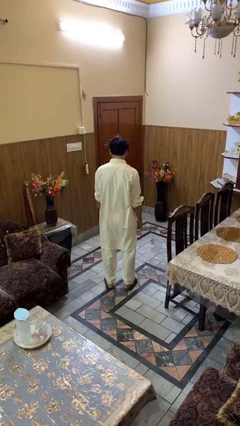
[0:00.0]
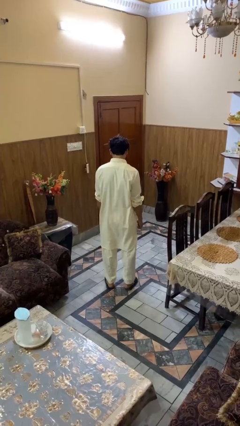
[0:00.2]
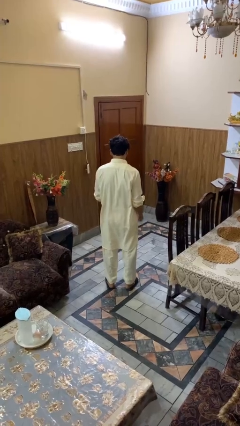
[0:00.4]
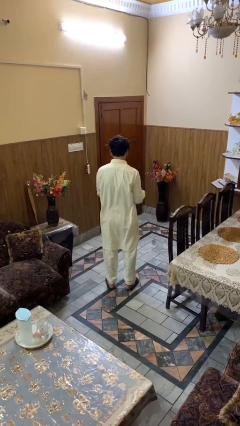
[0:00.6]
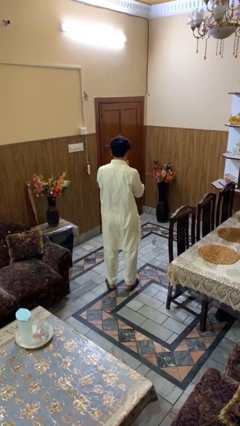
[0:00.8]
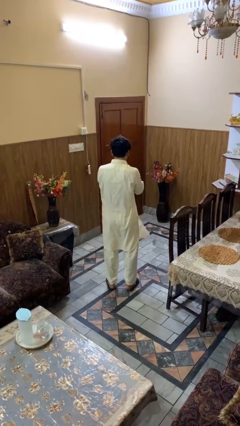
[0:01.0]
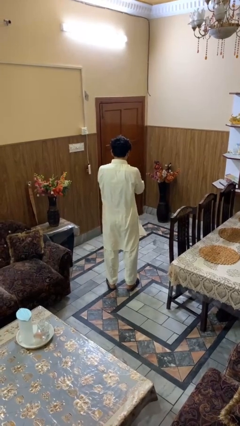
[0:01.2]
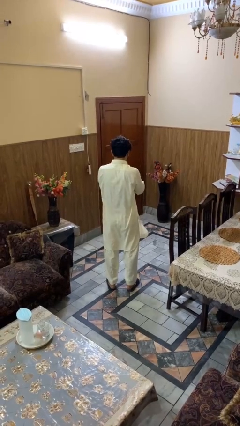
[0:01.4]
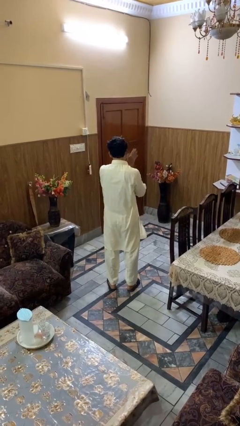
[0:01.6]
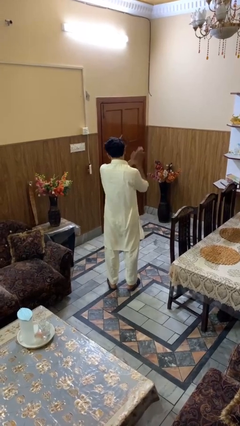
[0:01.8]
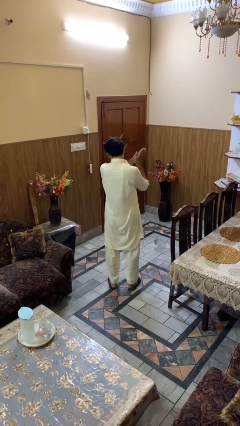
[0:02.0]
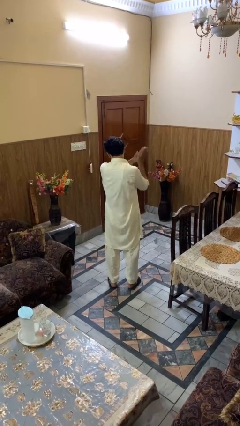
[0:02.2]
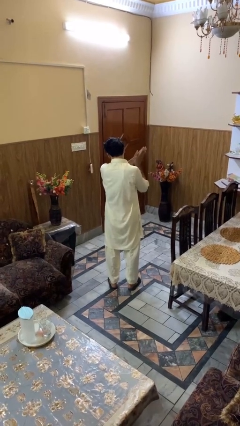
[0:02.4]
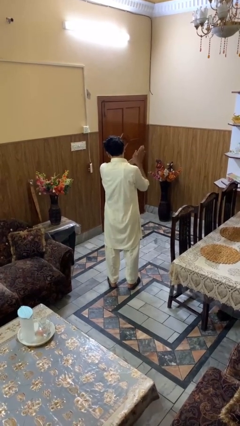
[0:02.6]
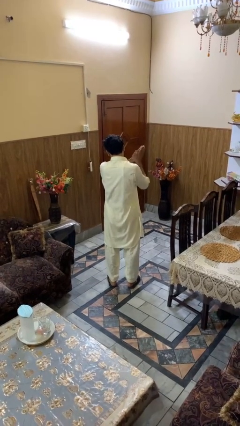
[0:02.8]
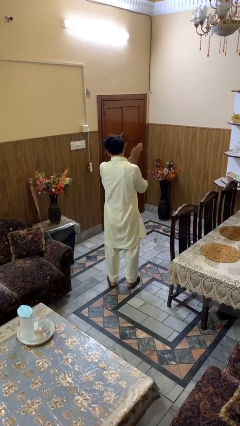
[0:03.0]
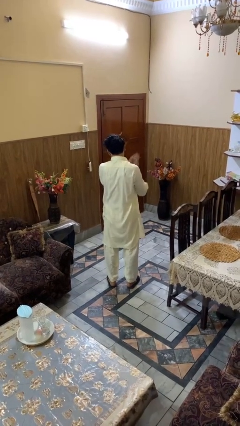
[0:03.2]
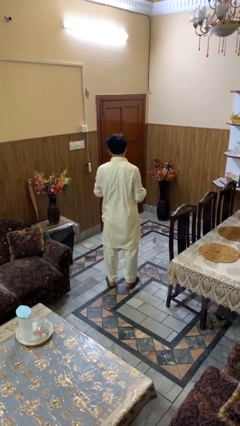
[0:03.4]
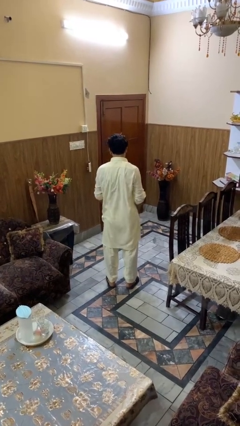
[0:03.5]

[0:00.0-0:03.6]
person blows into hands

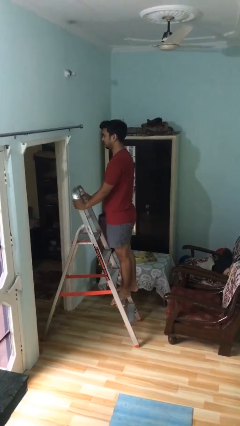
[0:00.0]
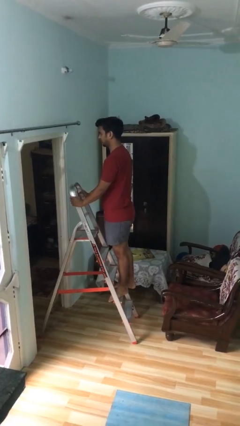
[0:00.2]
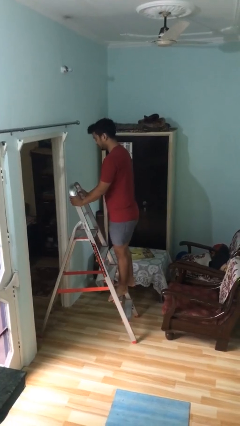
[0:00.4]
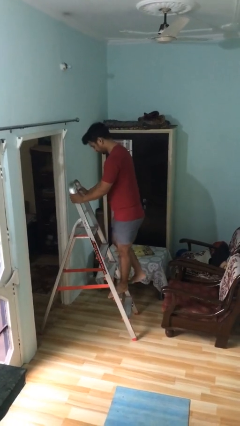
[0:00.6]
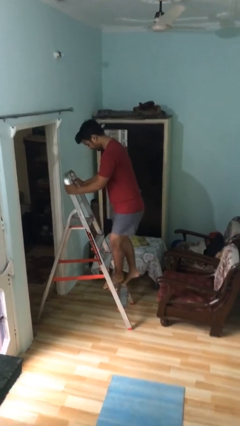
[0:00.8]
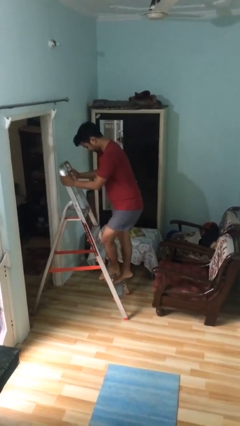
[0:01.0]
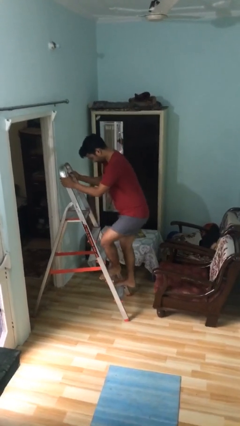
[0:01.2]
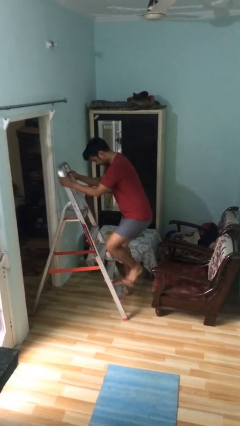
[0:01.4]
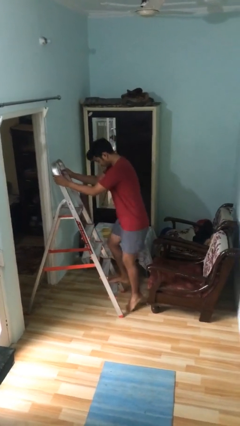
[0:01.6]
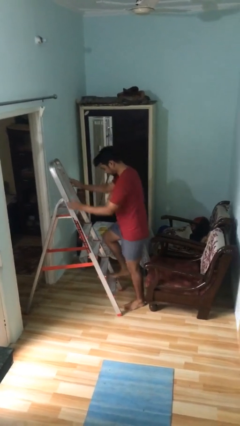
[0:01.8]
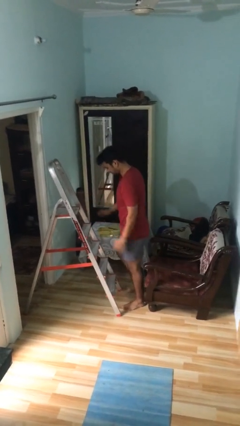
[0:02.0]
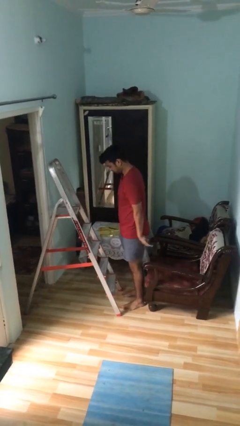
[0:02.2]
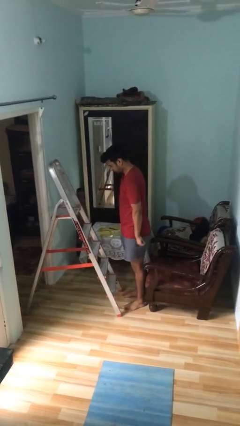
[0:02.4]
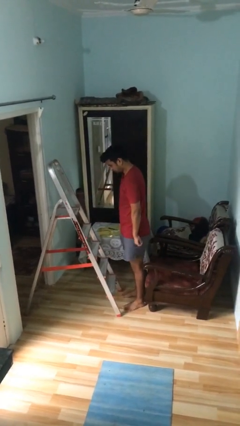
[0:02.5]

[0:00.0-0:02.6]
person climbs down ladder

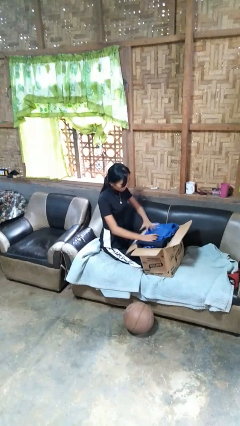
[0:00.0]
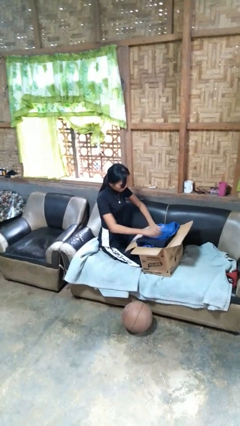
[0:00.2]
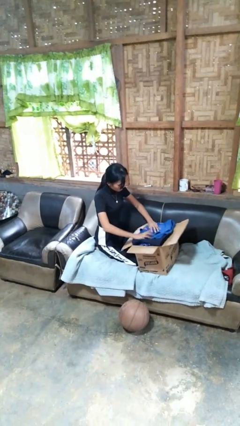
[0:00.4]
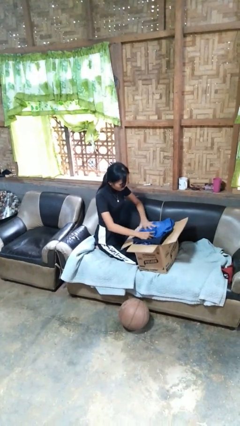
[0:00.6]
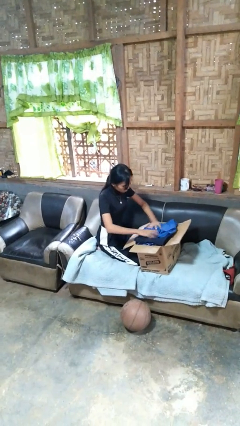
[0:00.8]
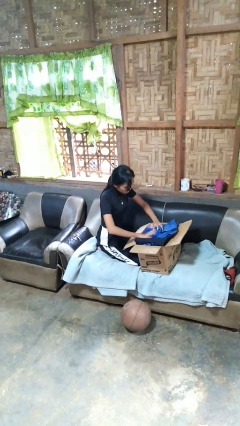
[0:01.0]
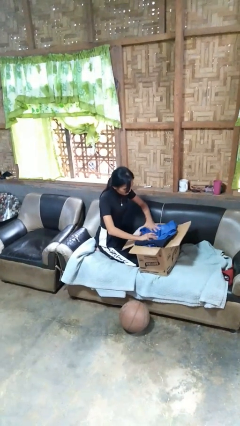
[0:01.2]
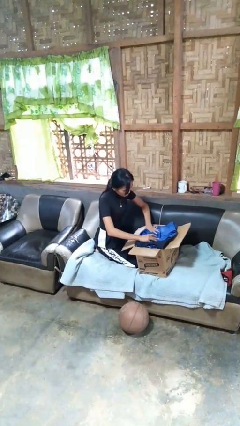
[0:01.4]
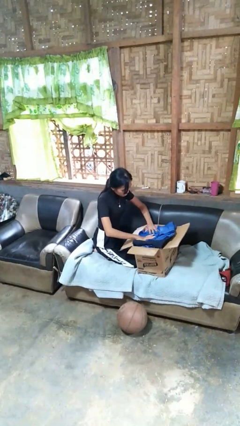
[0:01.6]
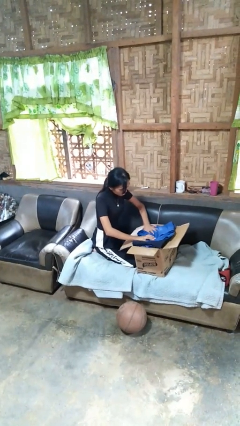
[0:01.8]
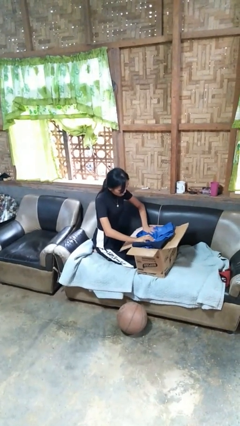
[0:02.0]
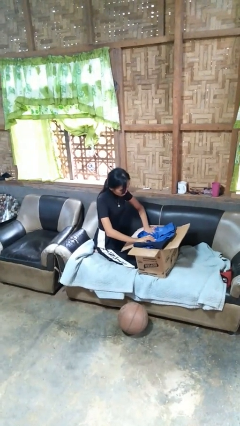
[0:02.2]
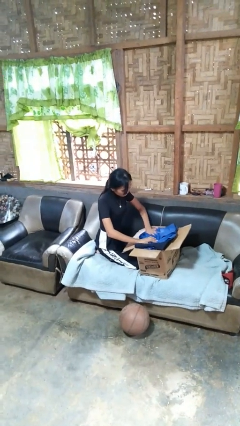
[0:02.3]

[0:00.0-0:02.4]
person searches in box

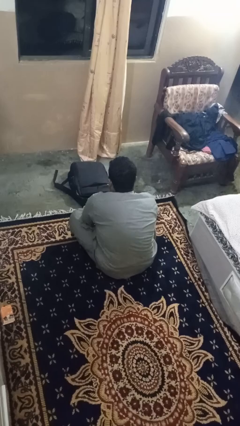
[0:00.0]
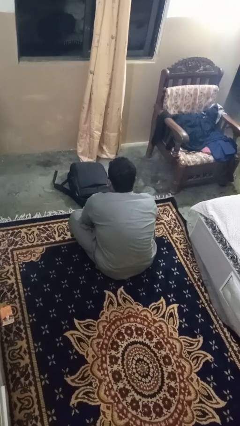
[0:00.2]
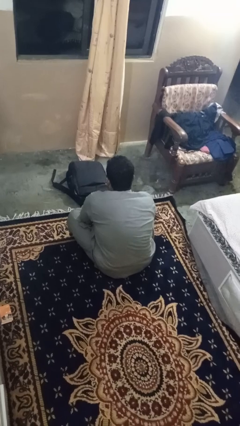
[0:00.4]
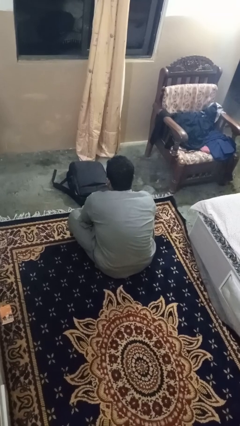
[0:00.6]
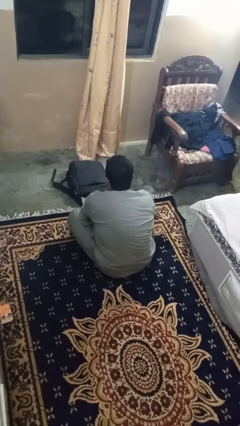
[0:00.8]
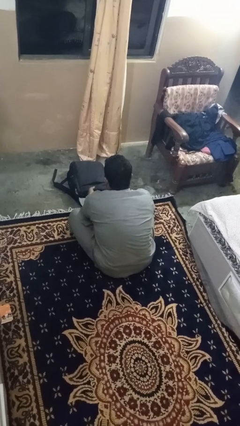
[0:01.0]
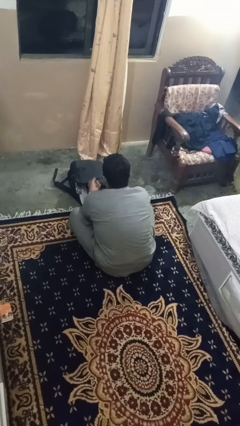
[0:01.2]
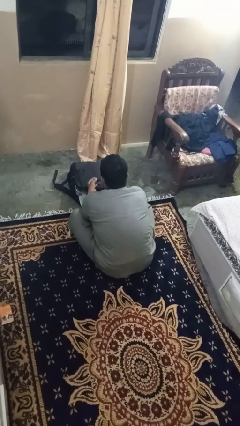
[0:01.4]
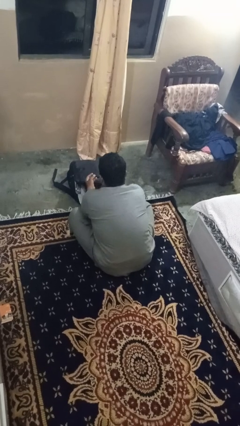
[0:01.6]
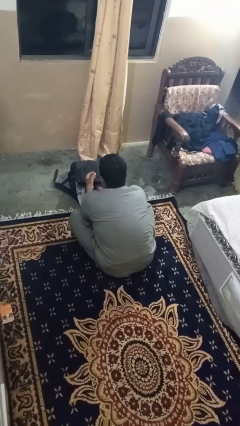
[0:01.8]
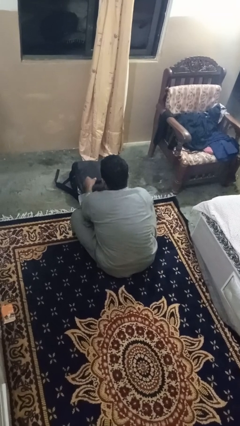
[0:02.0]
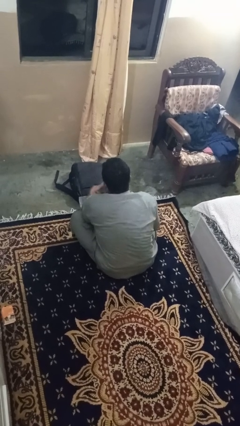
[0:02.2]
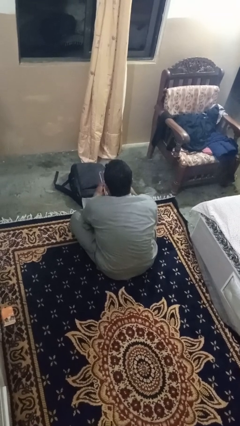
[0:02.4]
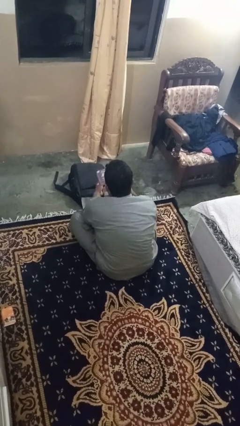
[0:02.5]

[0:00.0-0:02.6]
person takes object from bag

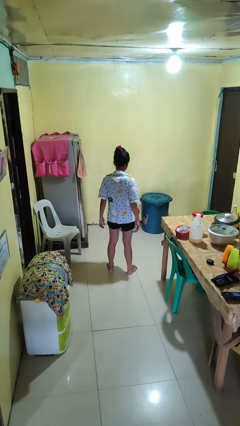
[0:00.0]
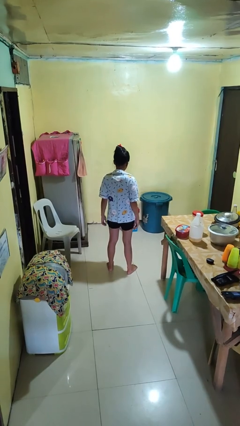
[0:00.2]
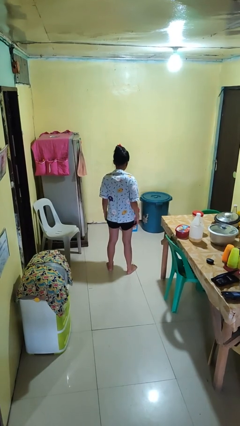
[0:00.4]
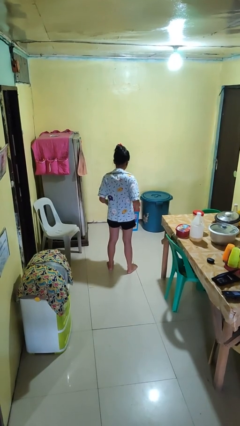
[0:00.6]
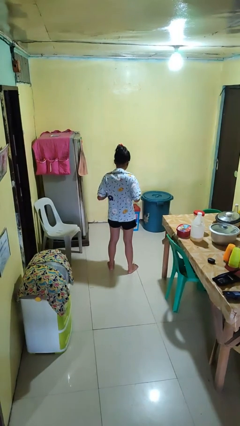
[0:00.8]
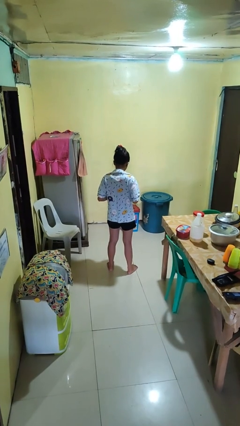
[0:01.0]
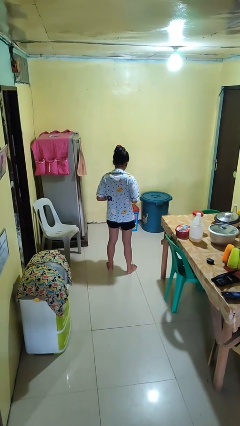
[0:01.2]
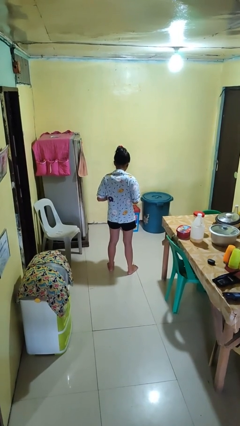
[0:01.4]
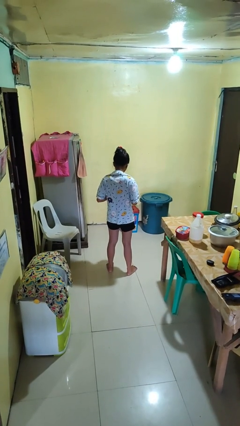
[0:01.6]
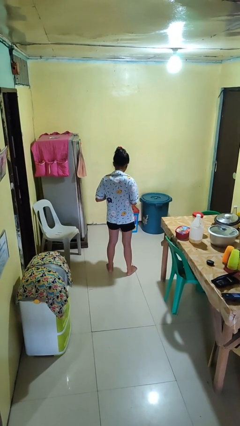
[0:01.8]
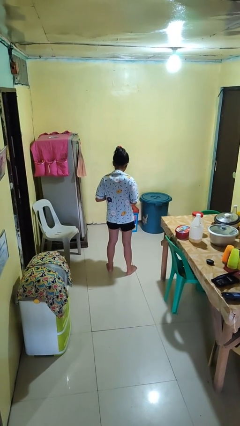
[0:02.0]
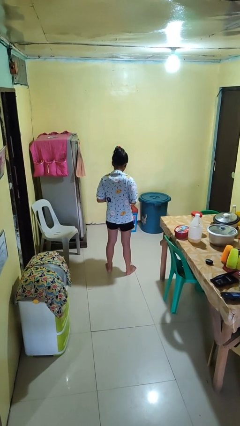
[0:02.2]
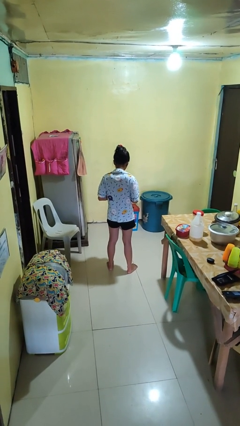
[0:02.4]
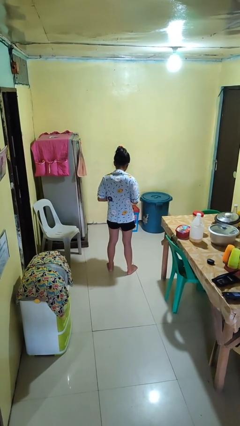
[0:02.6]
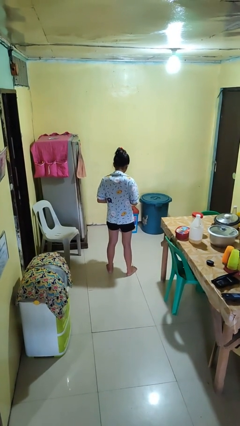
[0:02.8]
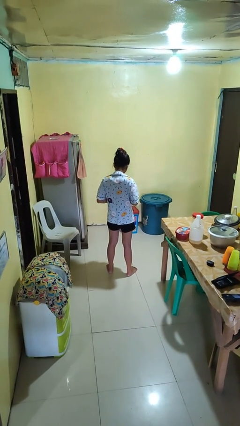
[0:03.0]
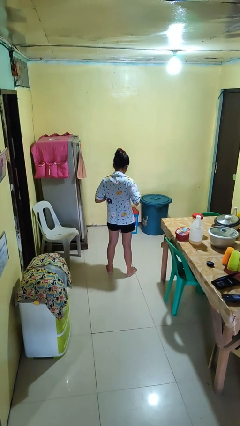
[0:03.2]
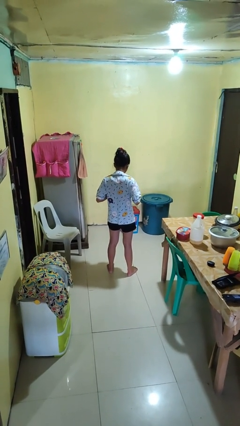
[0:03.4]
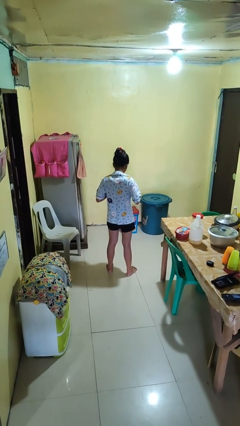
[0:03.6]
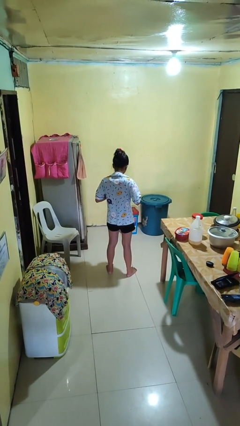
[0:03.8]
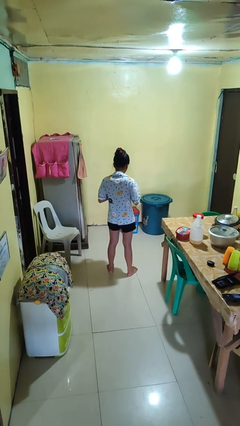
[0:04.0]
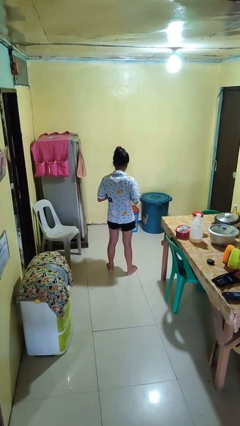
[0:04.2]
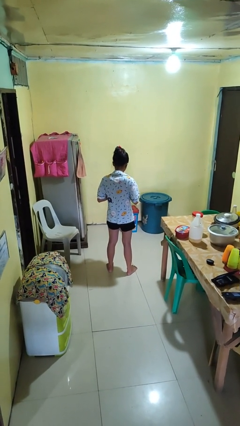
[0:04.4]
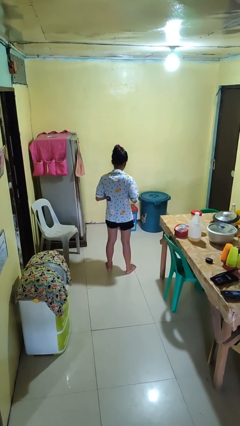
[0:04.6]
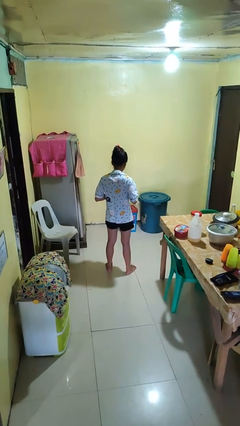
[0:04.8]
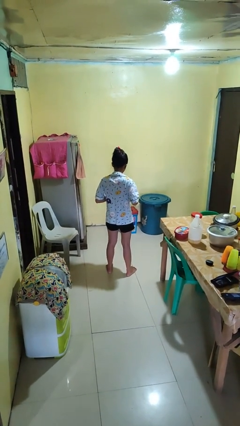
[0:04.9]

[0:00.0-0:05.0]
person buttons shirt

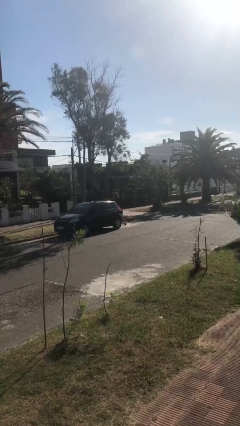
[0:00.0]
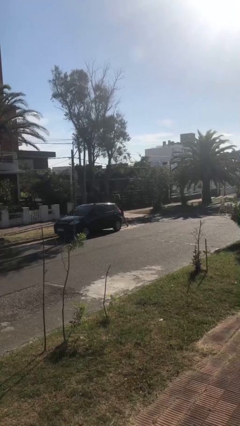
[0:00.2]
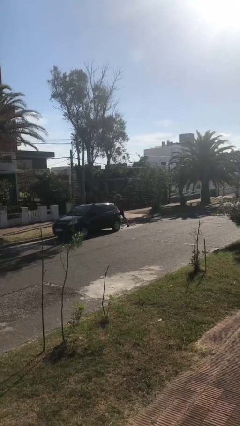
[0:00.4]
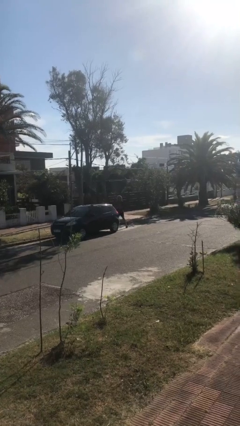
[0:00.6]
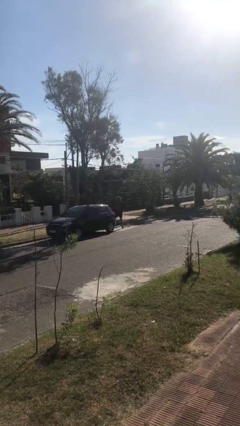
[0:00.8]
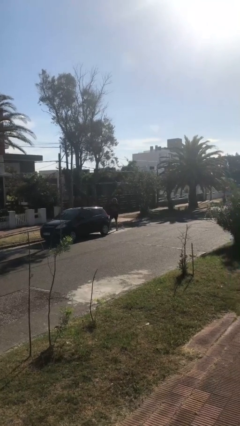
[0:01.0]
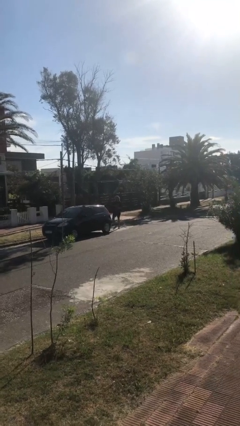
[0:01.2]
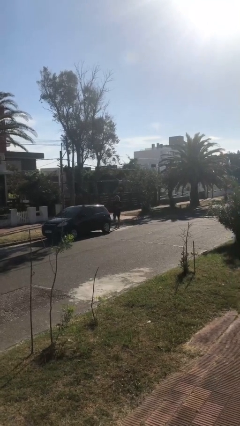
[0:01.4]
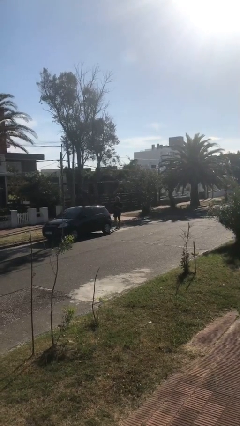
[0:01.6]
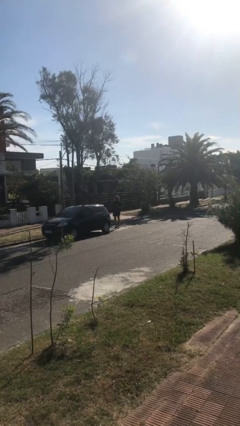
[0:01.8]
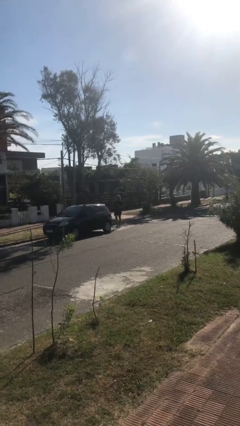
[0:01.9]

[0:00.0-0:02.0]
person unloads car
